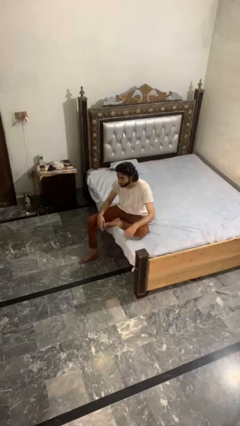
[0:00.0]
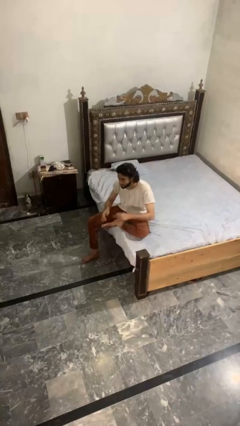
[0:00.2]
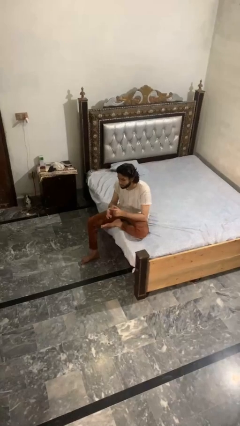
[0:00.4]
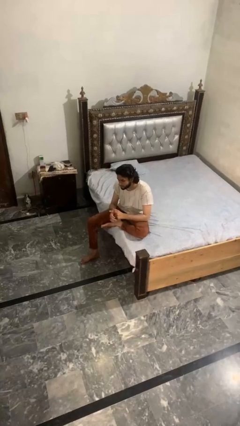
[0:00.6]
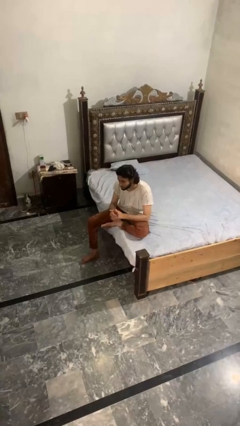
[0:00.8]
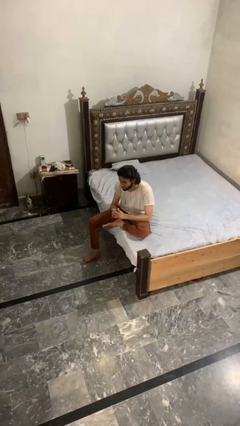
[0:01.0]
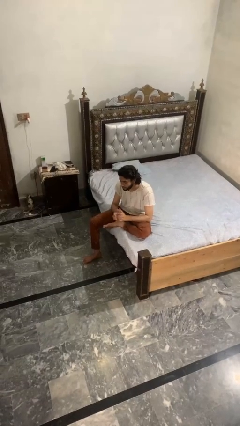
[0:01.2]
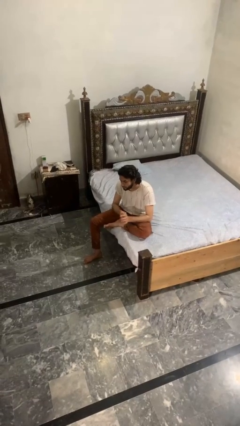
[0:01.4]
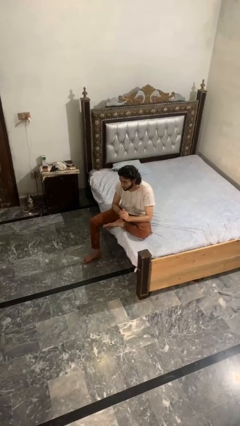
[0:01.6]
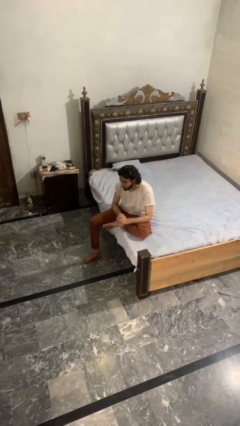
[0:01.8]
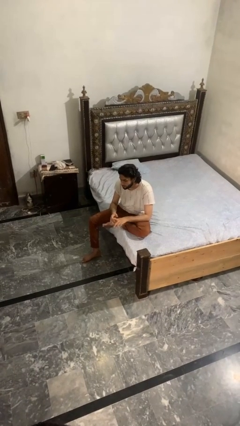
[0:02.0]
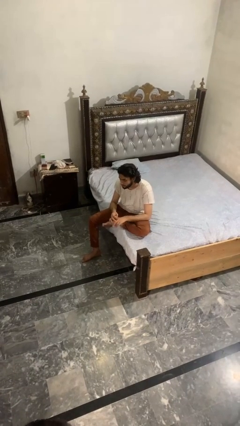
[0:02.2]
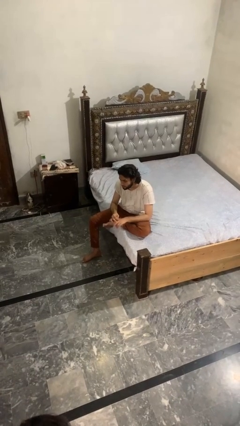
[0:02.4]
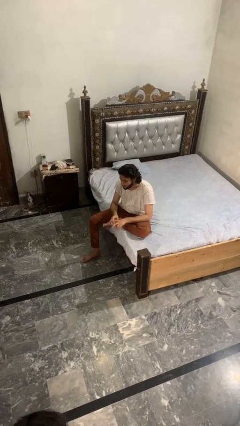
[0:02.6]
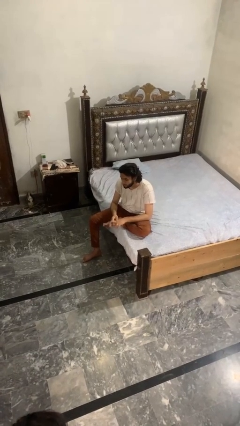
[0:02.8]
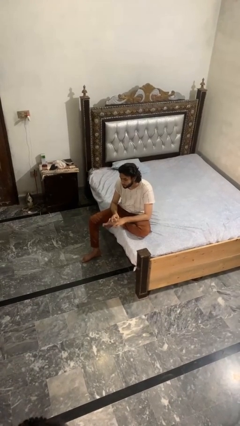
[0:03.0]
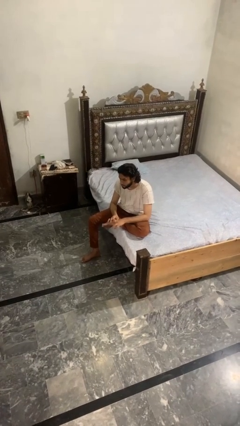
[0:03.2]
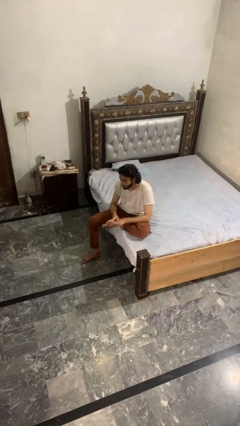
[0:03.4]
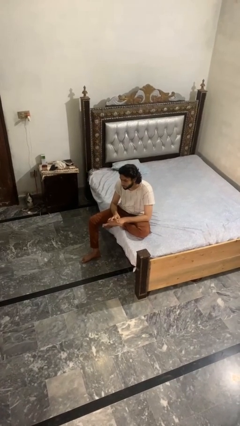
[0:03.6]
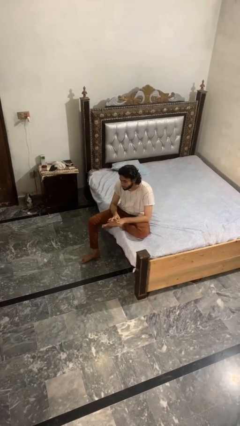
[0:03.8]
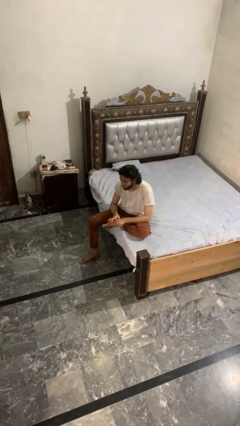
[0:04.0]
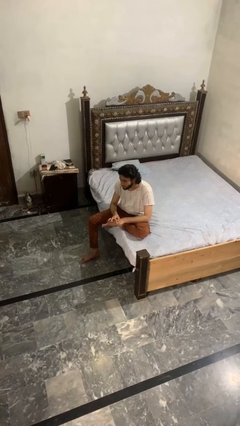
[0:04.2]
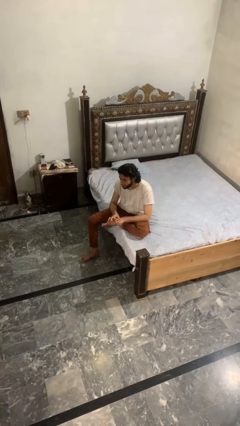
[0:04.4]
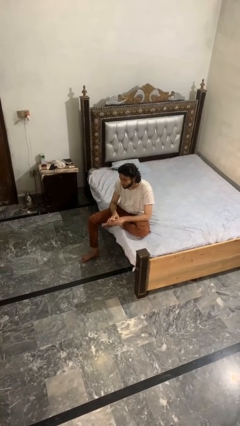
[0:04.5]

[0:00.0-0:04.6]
person cracks knuckles

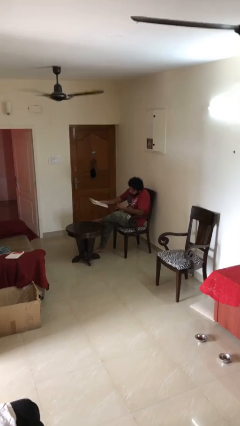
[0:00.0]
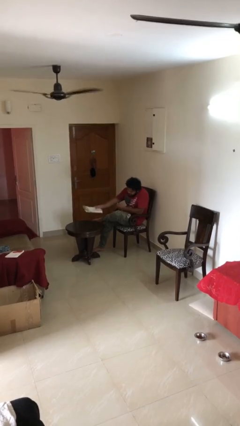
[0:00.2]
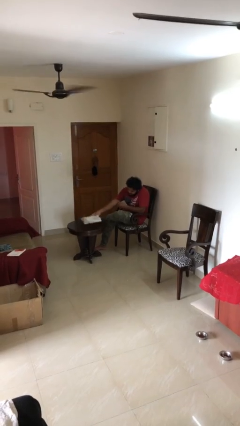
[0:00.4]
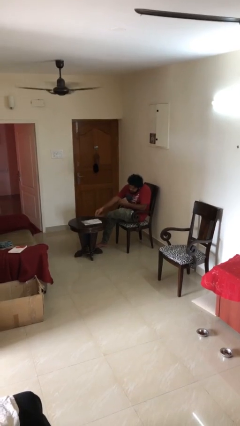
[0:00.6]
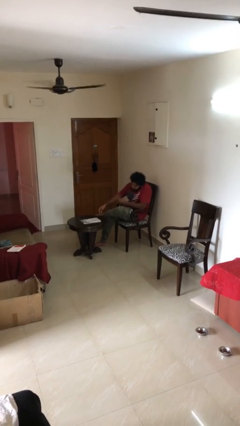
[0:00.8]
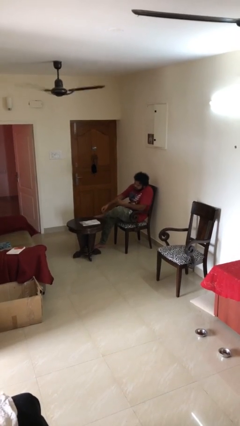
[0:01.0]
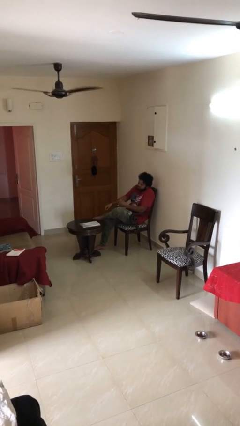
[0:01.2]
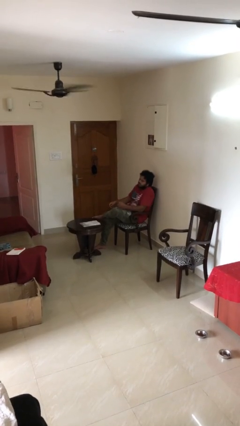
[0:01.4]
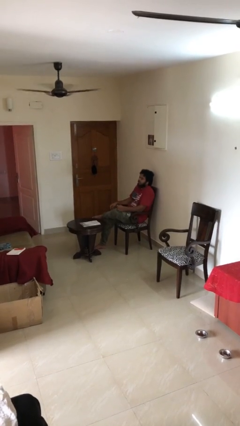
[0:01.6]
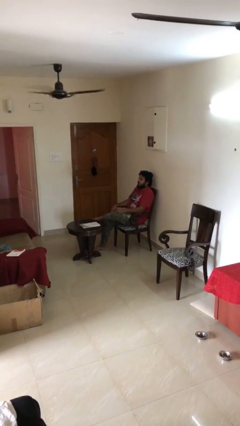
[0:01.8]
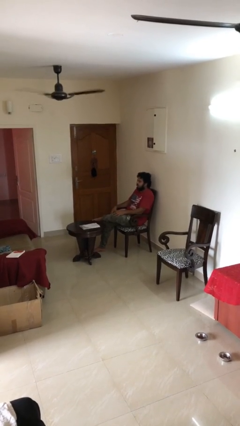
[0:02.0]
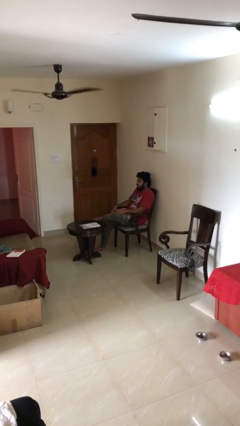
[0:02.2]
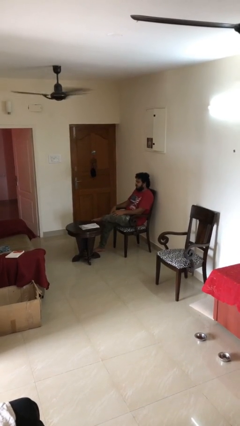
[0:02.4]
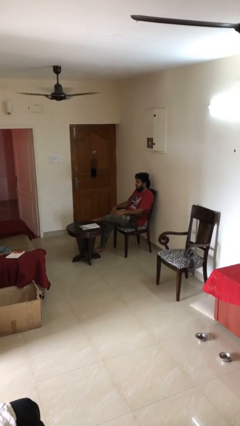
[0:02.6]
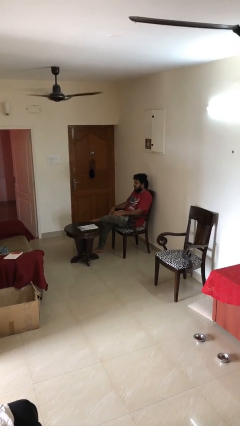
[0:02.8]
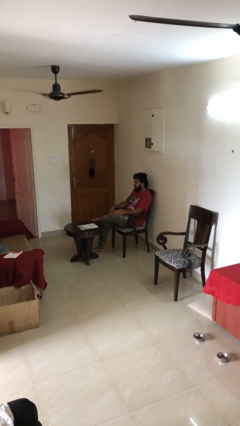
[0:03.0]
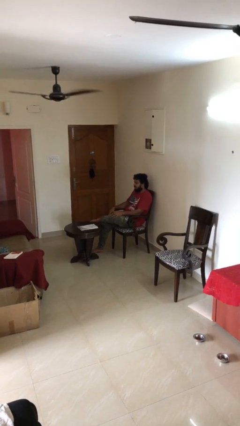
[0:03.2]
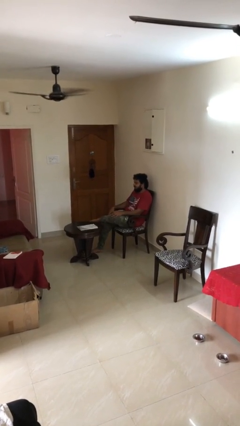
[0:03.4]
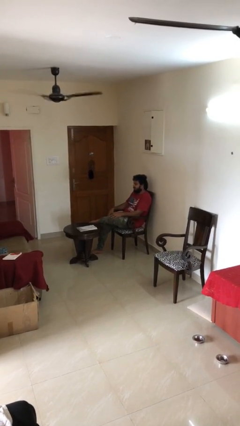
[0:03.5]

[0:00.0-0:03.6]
person puts down object on table

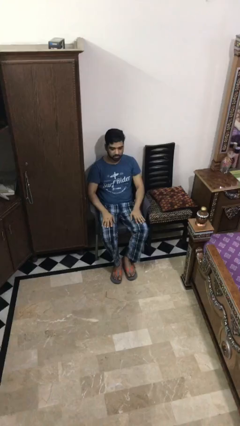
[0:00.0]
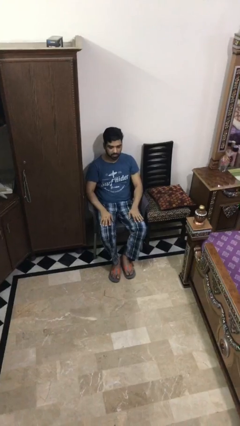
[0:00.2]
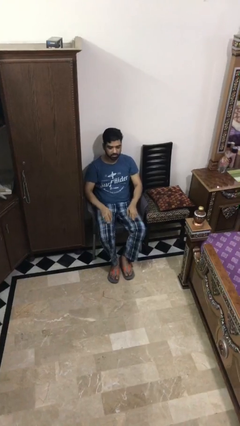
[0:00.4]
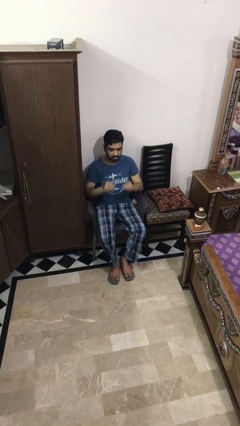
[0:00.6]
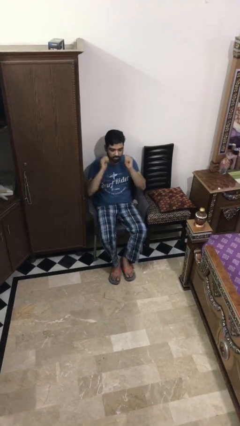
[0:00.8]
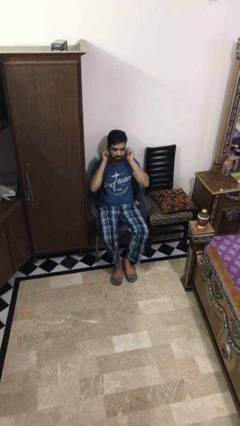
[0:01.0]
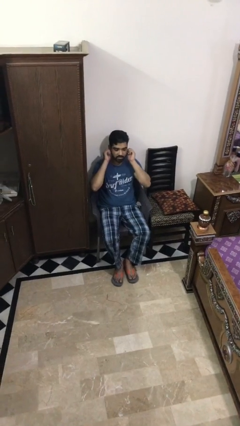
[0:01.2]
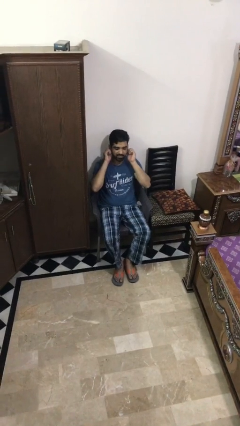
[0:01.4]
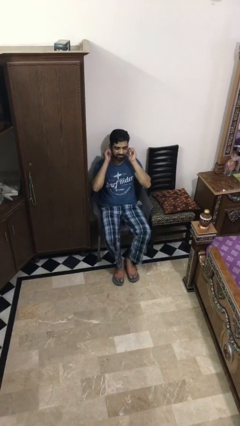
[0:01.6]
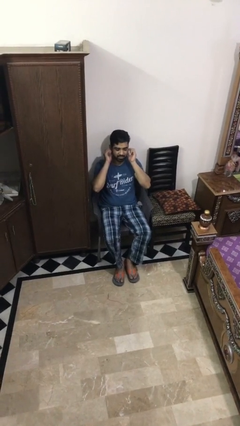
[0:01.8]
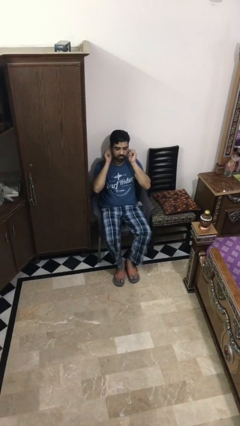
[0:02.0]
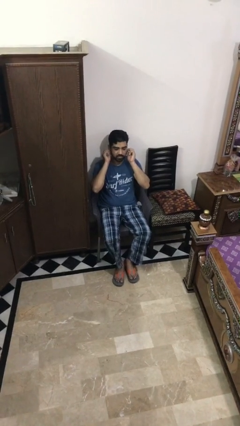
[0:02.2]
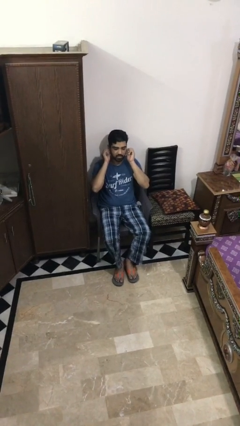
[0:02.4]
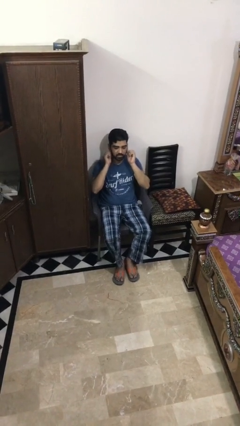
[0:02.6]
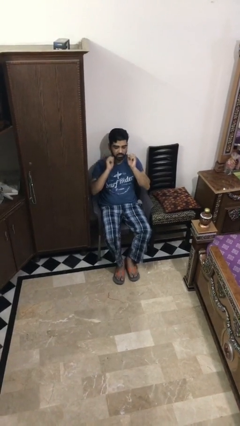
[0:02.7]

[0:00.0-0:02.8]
person touches earlobe

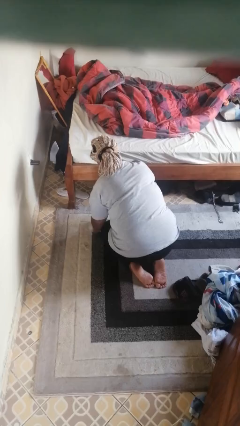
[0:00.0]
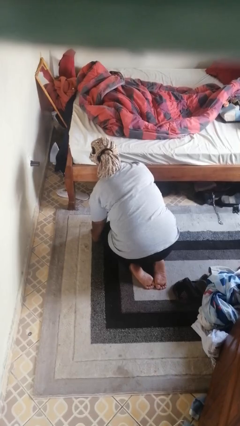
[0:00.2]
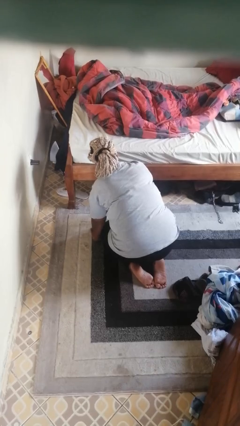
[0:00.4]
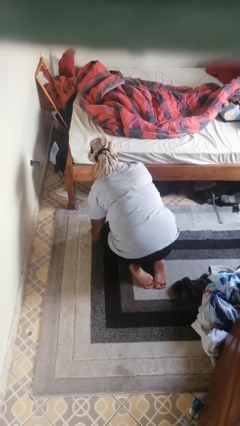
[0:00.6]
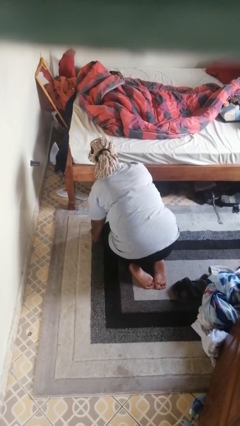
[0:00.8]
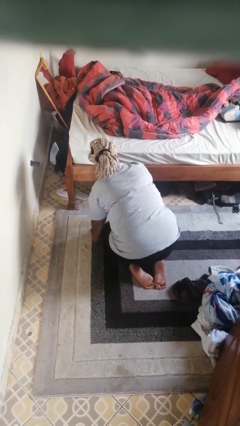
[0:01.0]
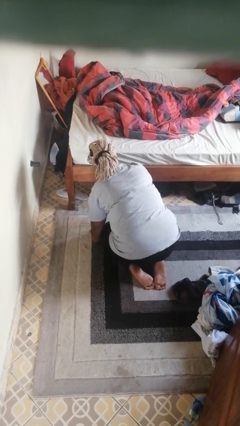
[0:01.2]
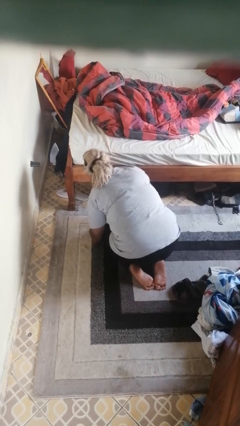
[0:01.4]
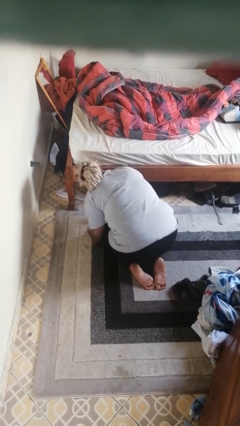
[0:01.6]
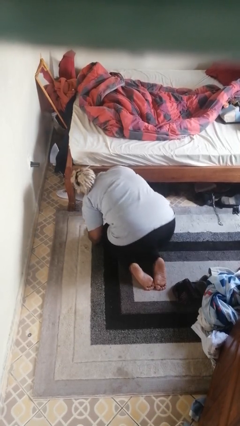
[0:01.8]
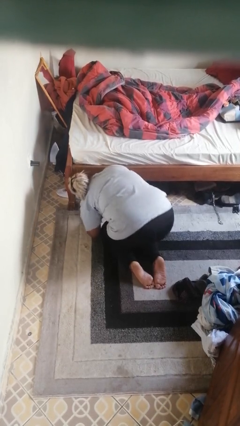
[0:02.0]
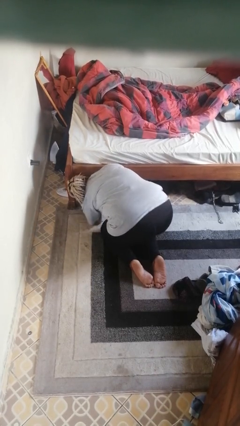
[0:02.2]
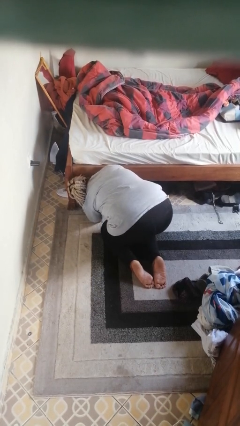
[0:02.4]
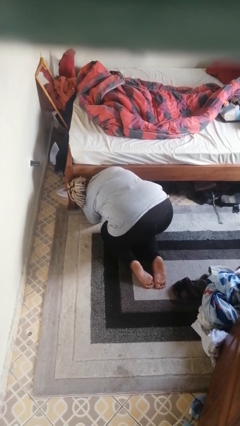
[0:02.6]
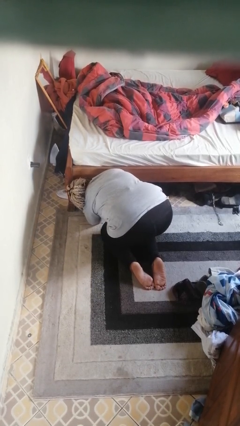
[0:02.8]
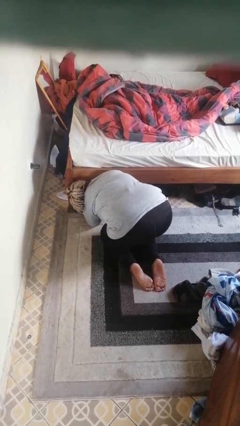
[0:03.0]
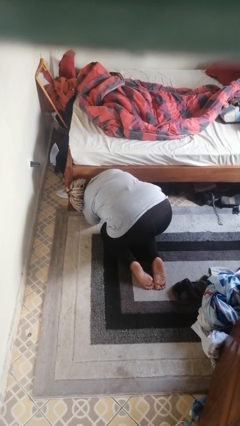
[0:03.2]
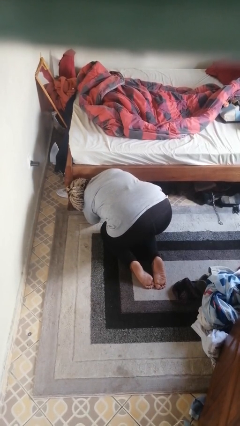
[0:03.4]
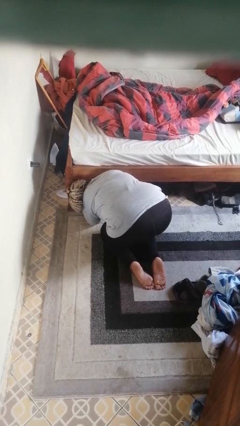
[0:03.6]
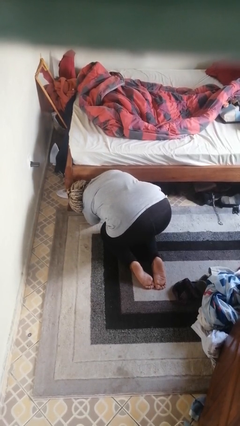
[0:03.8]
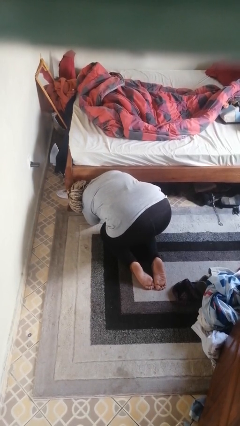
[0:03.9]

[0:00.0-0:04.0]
person searches under bed

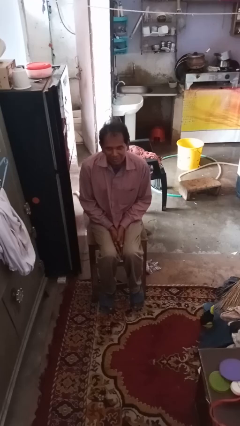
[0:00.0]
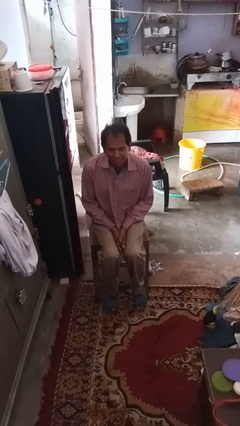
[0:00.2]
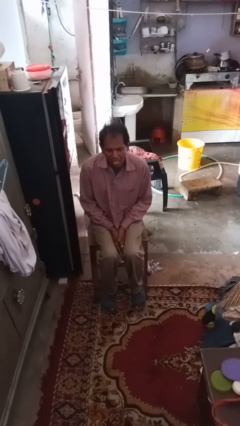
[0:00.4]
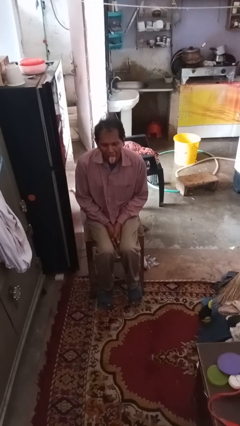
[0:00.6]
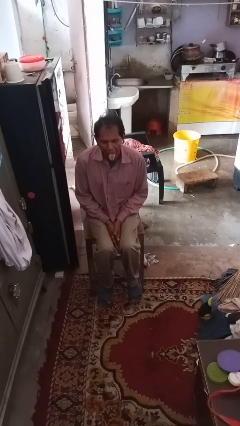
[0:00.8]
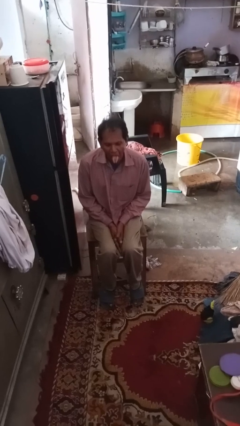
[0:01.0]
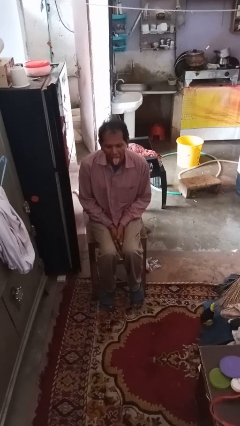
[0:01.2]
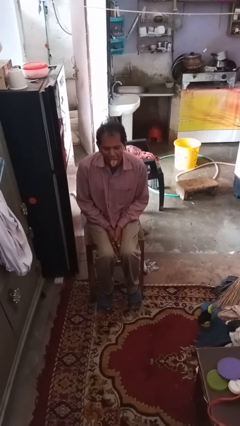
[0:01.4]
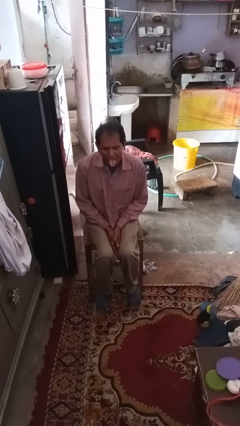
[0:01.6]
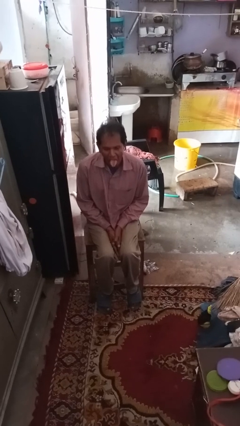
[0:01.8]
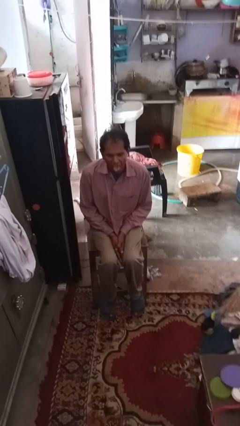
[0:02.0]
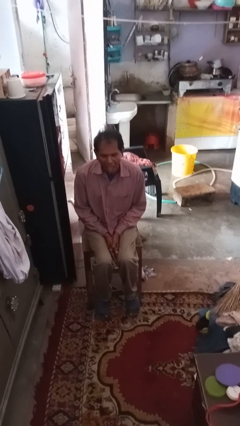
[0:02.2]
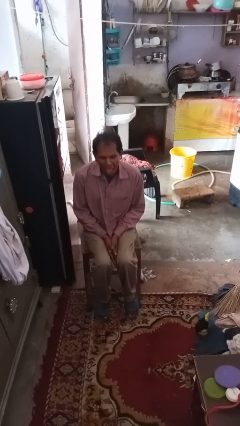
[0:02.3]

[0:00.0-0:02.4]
person sticks out tongue

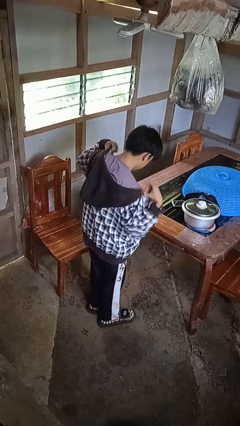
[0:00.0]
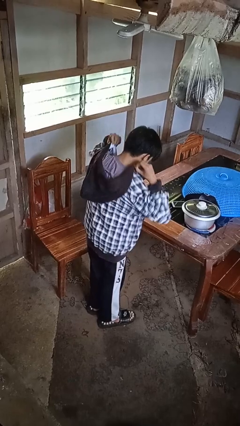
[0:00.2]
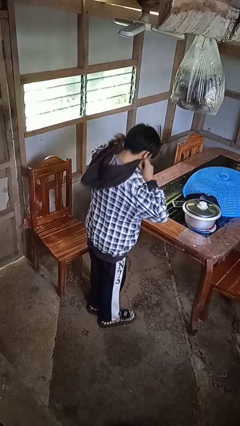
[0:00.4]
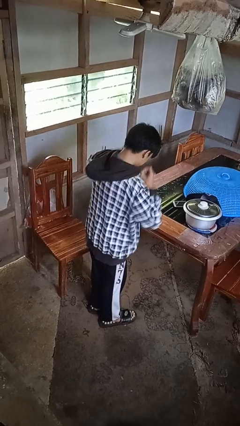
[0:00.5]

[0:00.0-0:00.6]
person zips up jacket
